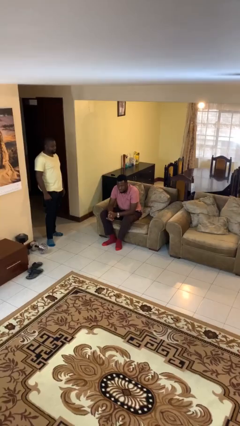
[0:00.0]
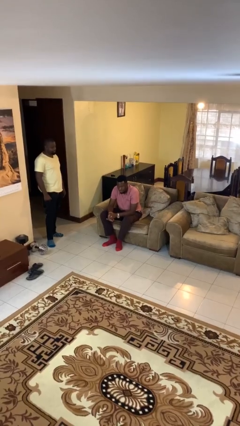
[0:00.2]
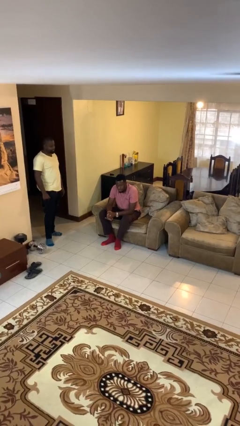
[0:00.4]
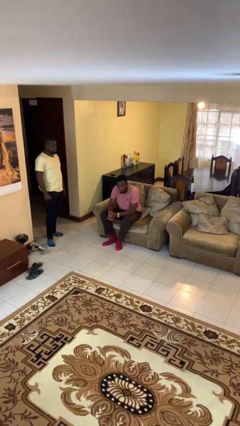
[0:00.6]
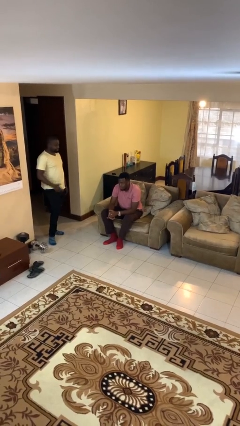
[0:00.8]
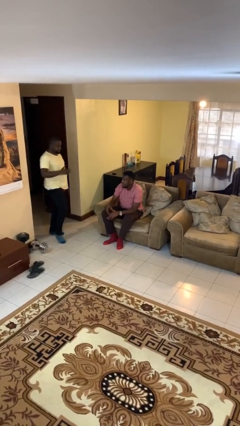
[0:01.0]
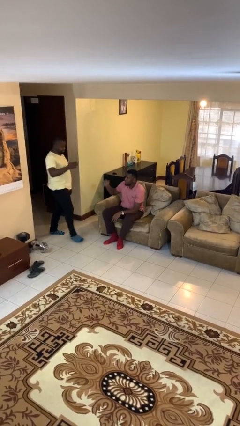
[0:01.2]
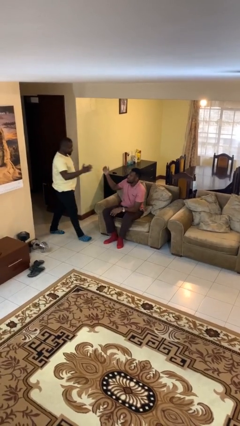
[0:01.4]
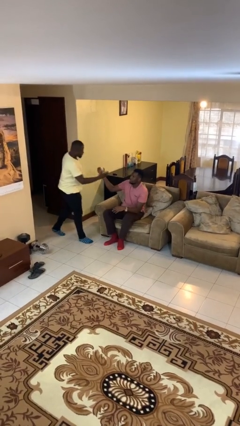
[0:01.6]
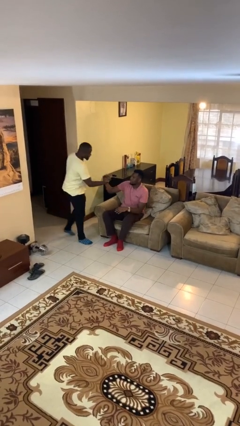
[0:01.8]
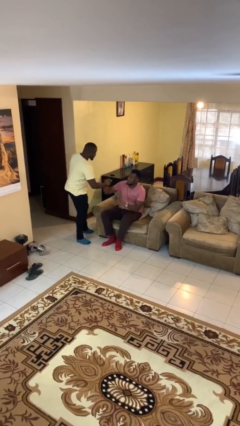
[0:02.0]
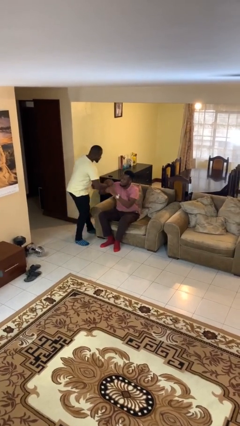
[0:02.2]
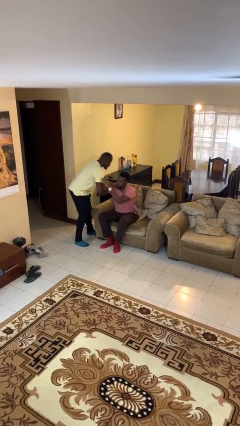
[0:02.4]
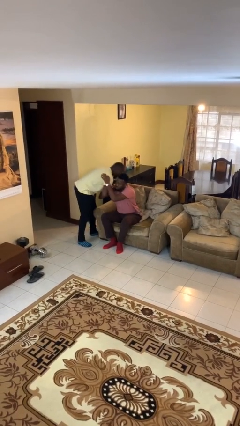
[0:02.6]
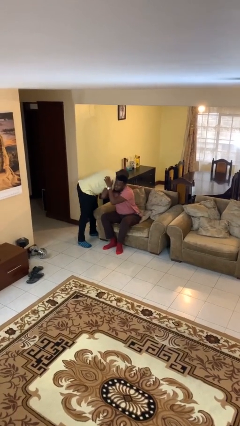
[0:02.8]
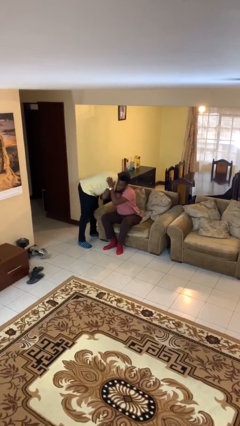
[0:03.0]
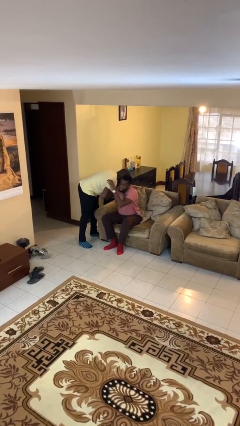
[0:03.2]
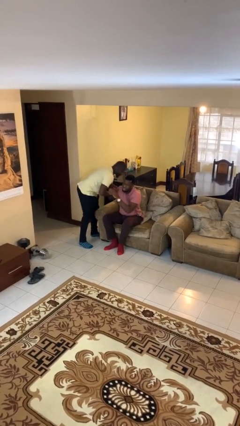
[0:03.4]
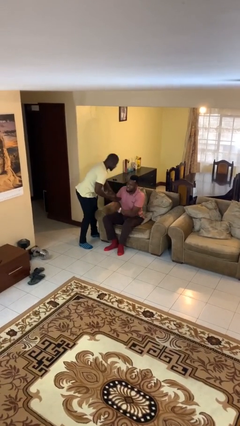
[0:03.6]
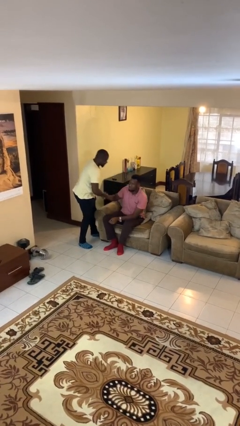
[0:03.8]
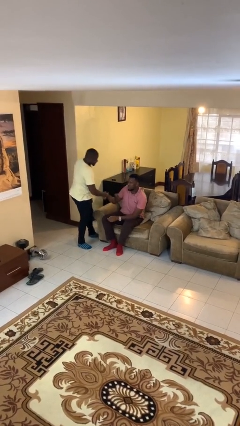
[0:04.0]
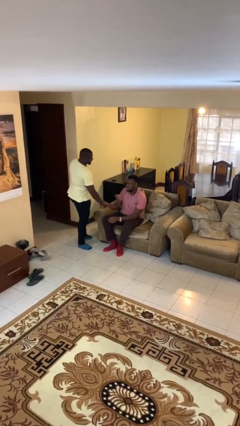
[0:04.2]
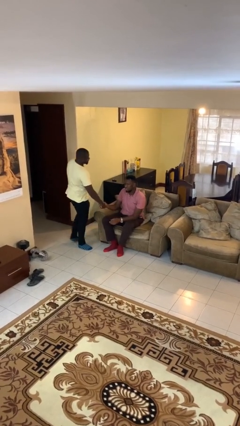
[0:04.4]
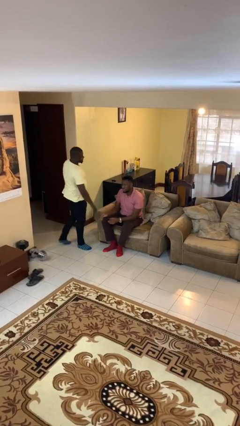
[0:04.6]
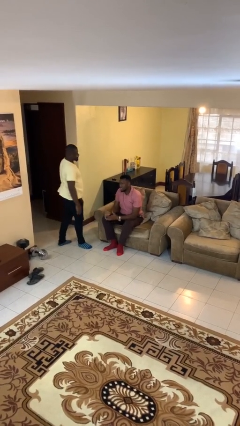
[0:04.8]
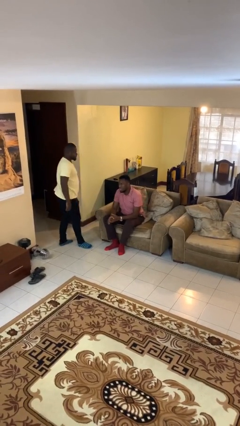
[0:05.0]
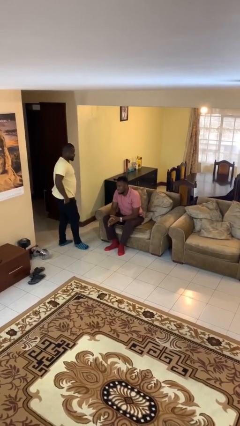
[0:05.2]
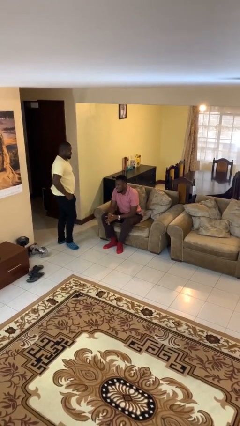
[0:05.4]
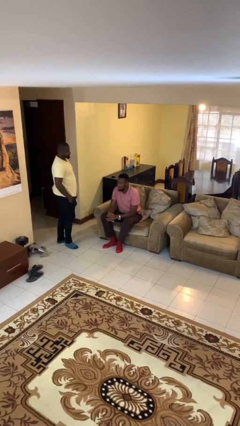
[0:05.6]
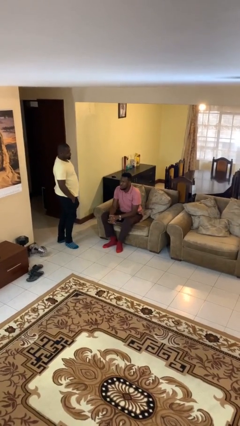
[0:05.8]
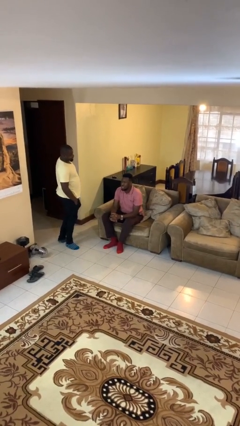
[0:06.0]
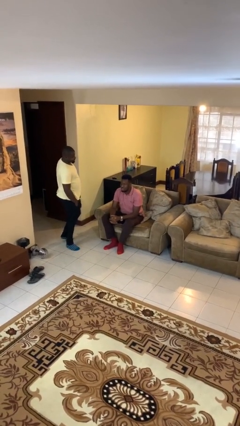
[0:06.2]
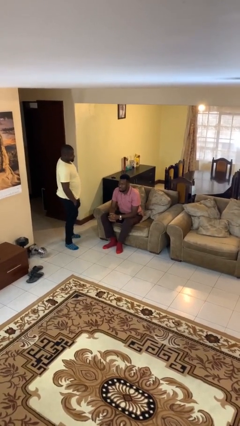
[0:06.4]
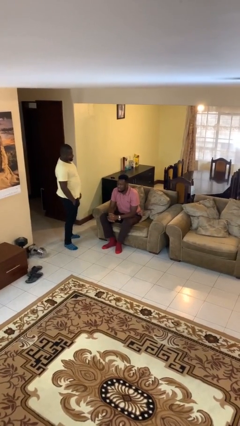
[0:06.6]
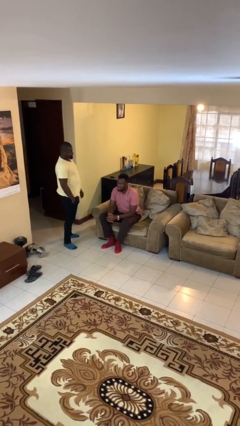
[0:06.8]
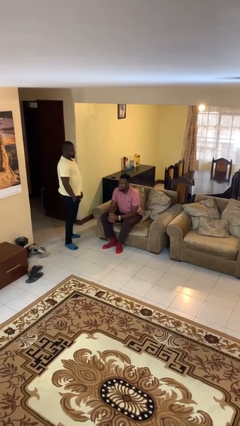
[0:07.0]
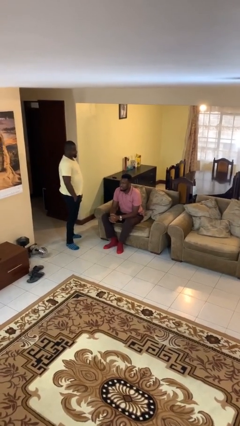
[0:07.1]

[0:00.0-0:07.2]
person embraces person

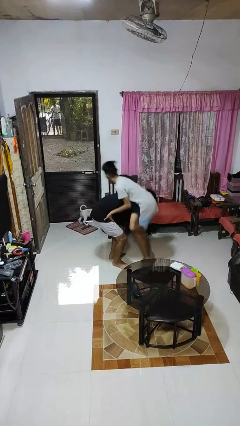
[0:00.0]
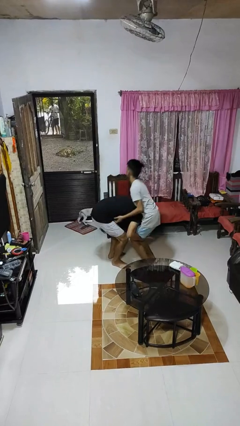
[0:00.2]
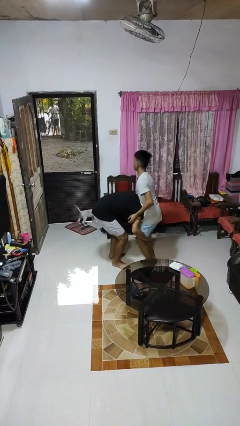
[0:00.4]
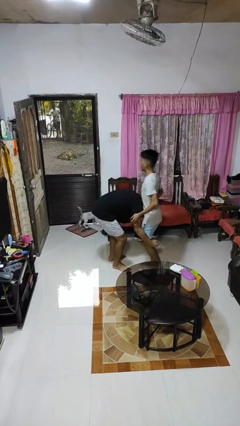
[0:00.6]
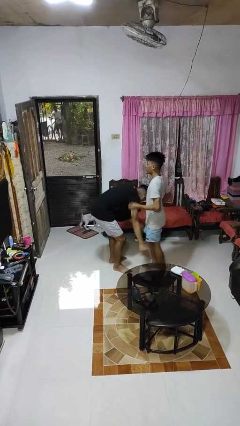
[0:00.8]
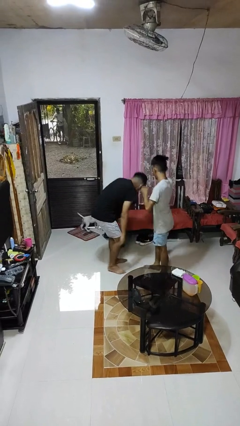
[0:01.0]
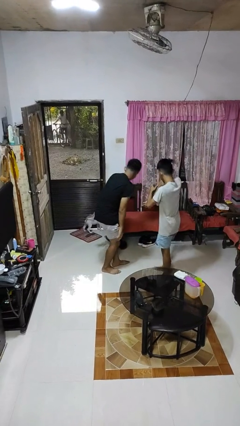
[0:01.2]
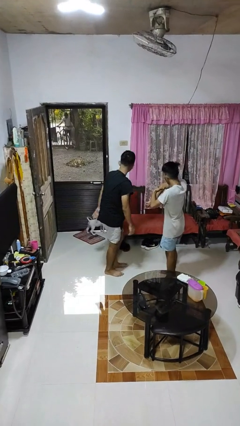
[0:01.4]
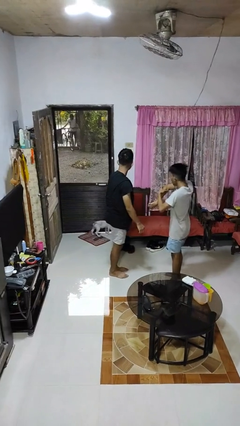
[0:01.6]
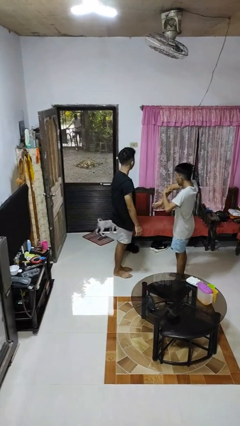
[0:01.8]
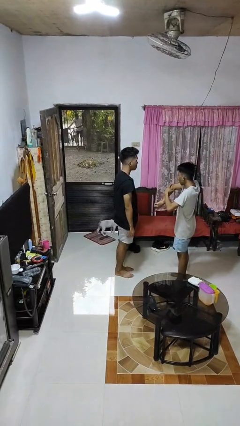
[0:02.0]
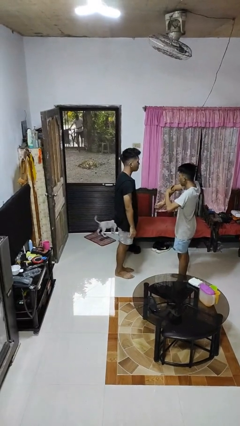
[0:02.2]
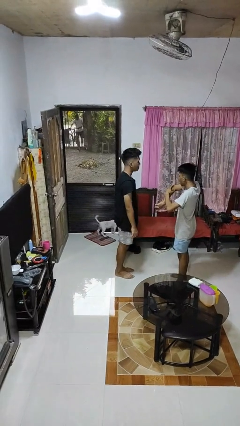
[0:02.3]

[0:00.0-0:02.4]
person puts down person

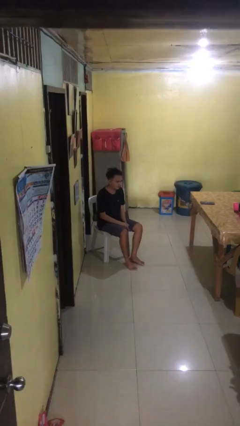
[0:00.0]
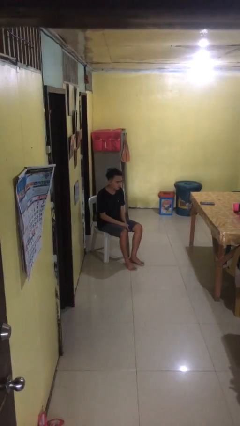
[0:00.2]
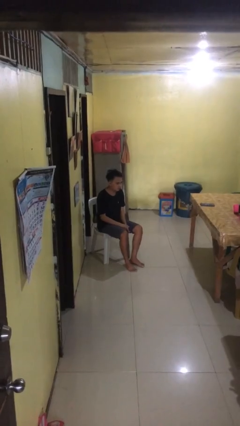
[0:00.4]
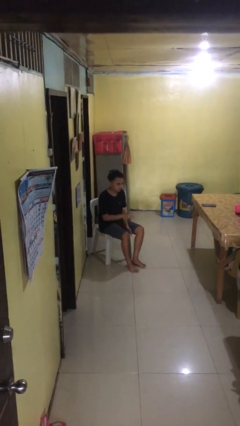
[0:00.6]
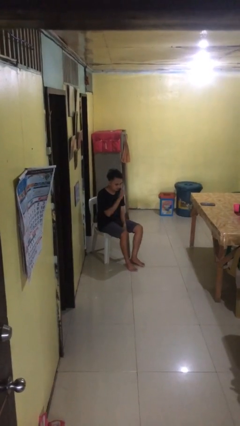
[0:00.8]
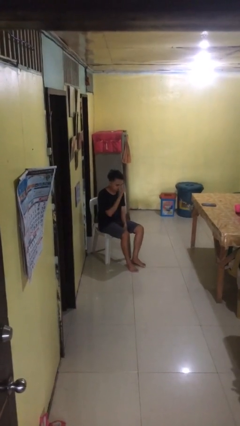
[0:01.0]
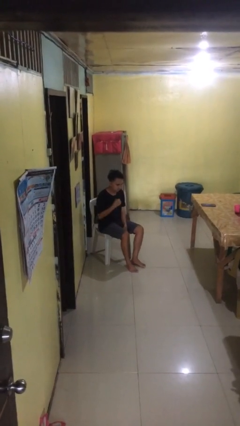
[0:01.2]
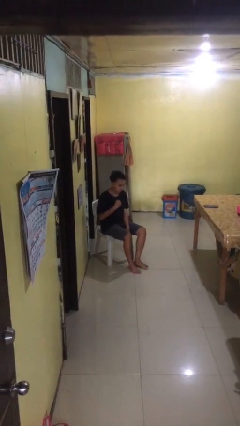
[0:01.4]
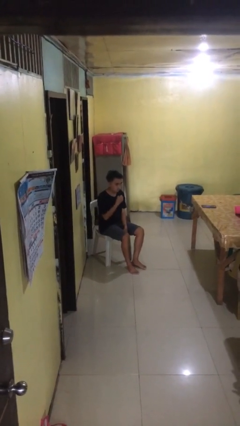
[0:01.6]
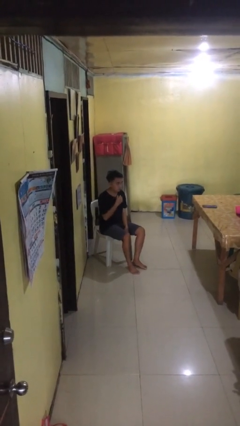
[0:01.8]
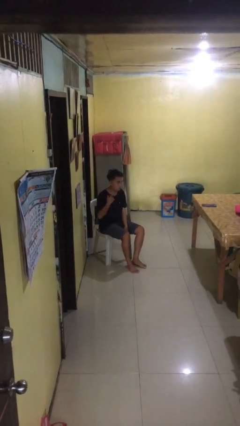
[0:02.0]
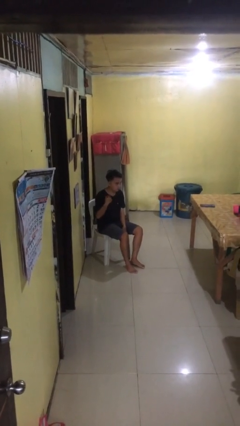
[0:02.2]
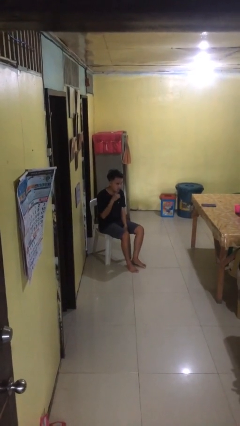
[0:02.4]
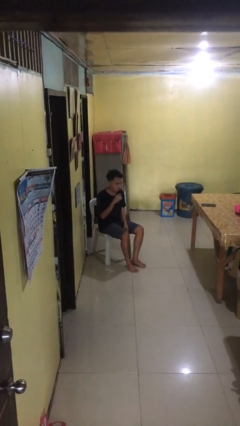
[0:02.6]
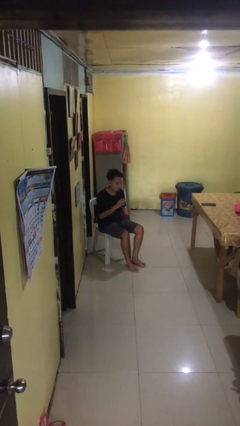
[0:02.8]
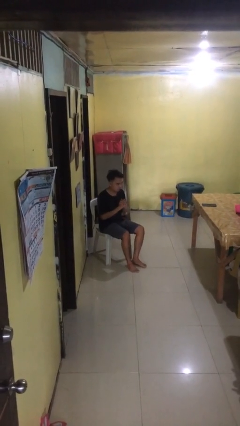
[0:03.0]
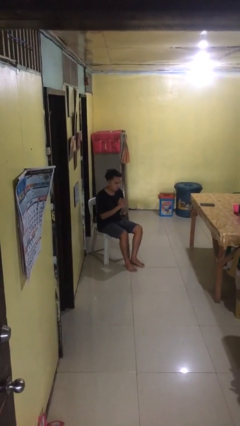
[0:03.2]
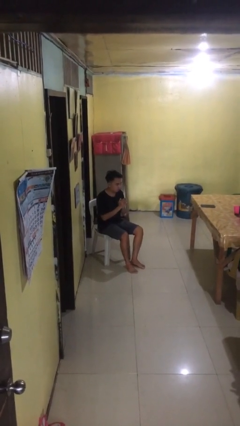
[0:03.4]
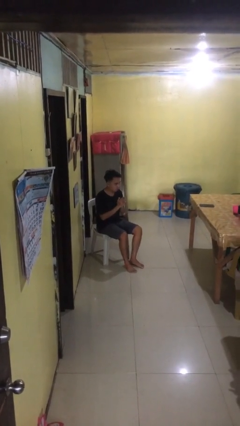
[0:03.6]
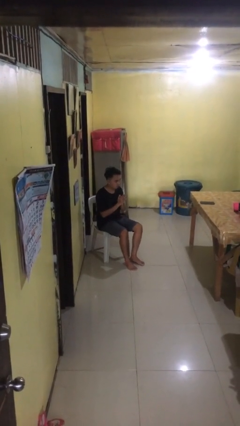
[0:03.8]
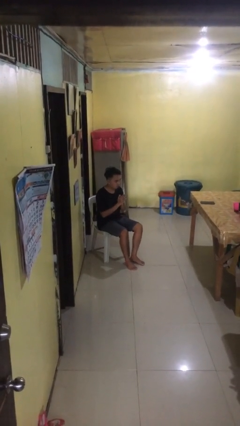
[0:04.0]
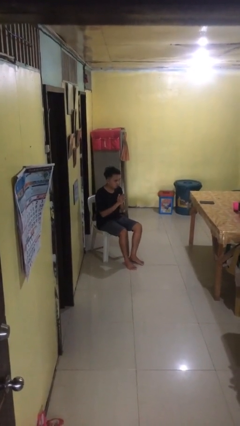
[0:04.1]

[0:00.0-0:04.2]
person prays

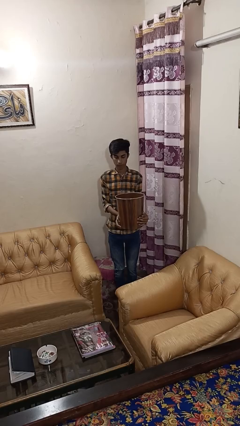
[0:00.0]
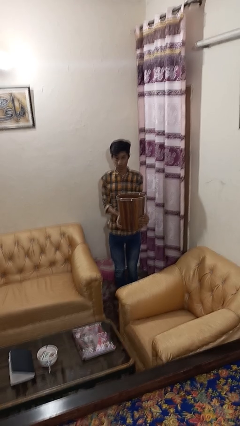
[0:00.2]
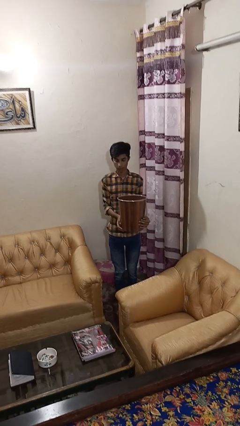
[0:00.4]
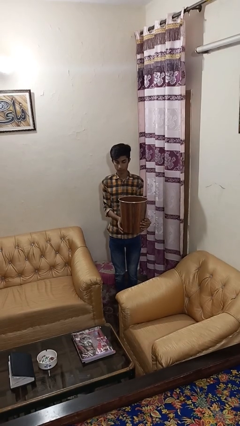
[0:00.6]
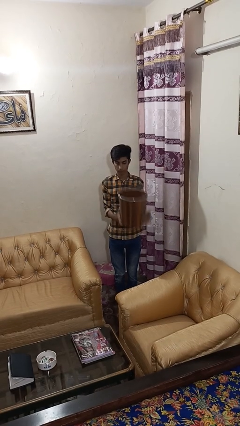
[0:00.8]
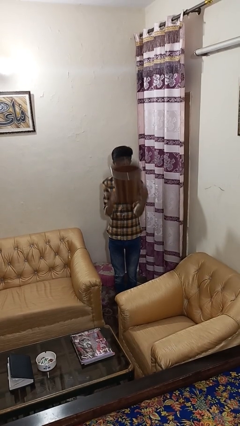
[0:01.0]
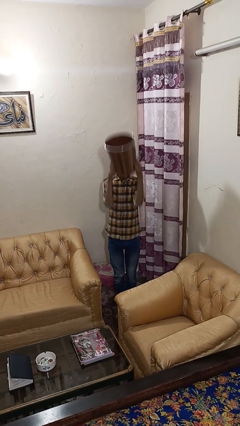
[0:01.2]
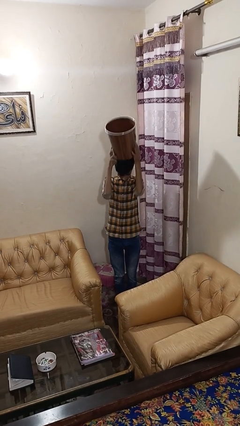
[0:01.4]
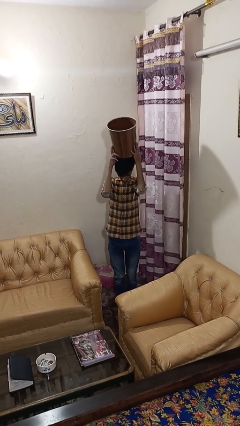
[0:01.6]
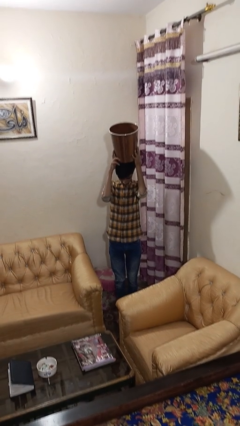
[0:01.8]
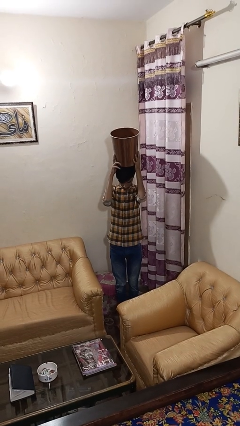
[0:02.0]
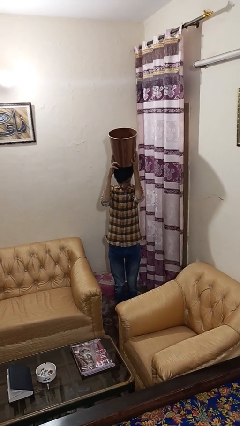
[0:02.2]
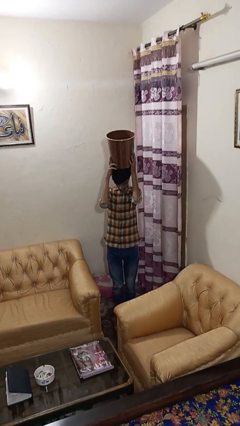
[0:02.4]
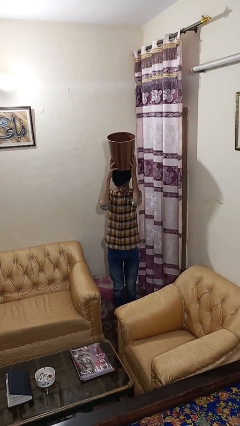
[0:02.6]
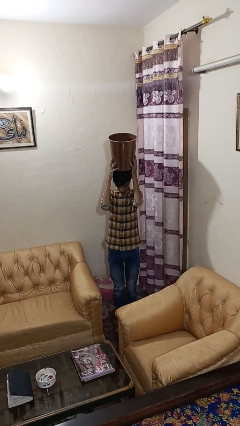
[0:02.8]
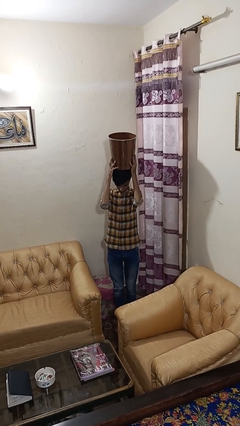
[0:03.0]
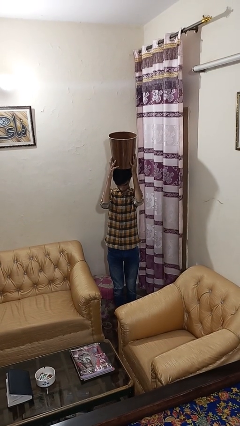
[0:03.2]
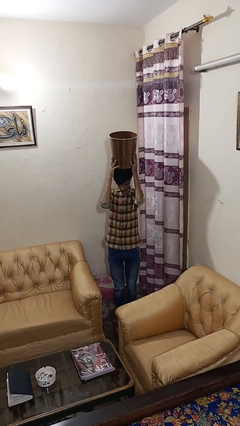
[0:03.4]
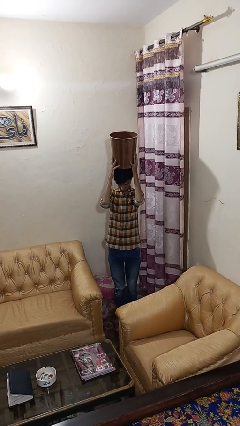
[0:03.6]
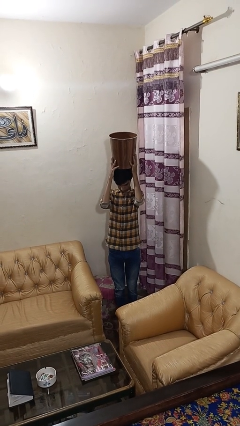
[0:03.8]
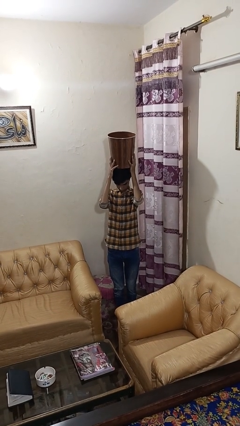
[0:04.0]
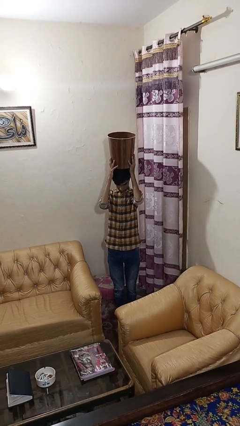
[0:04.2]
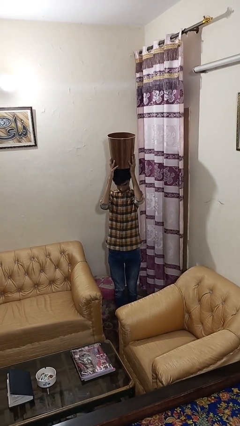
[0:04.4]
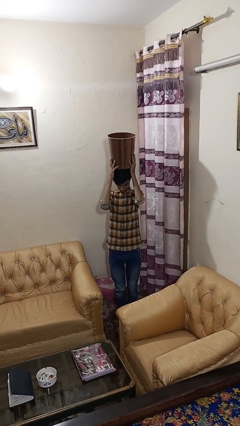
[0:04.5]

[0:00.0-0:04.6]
person holds object above head
